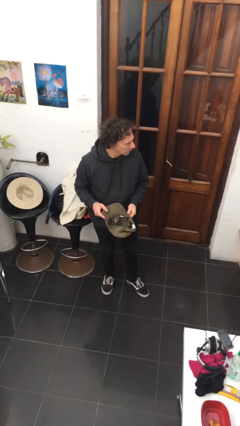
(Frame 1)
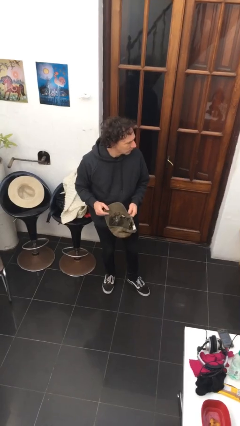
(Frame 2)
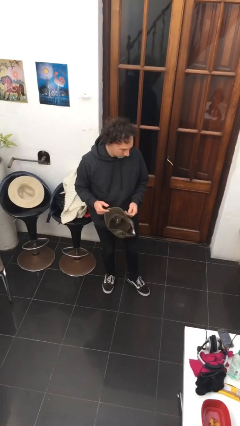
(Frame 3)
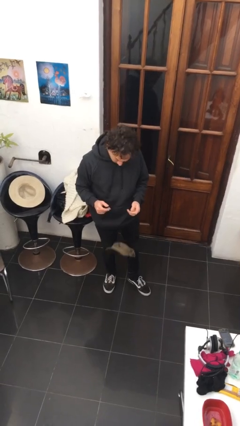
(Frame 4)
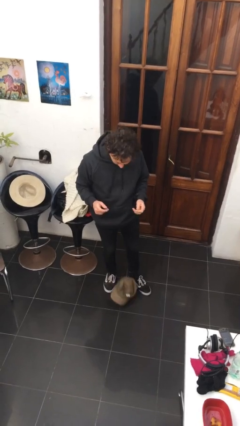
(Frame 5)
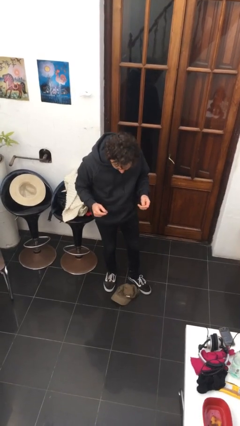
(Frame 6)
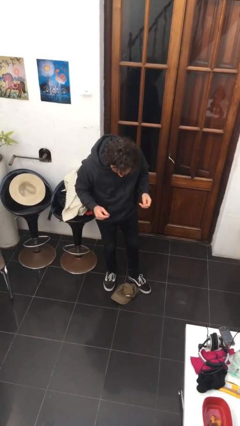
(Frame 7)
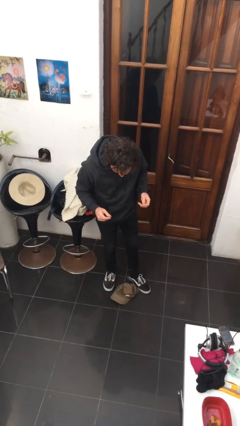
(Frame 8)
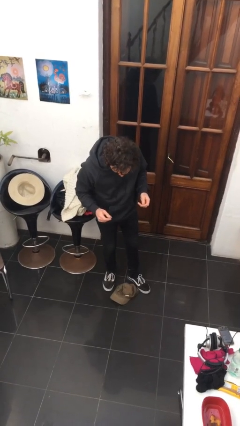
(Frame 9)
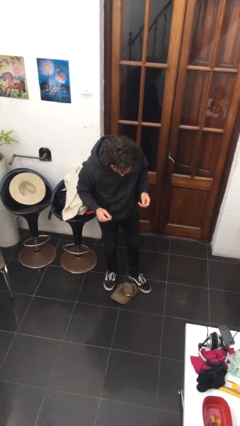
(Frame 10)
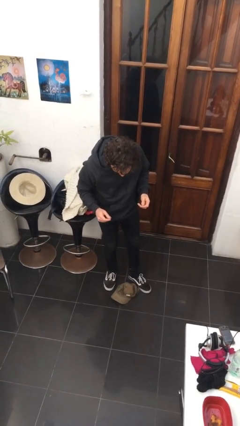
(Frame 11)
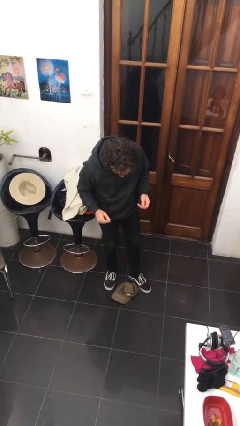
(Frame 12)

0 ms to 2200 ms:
person drops object

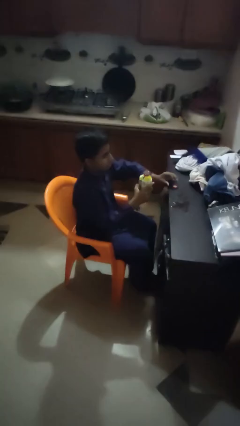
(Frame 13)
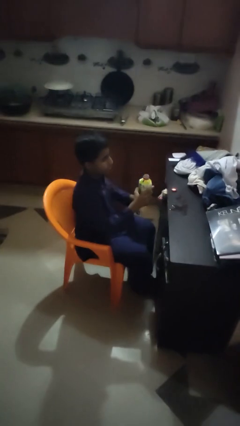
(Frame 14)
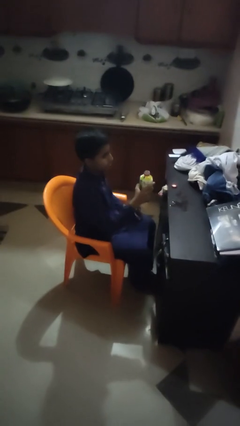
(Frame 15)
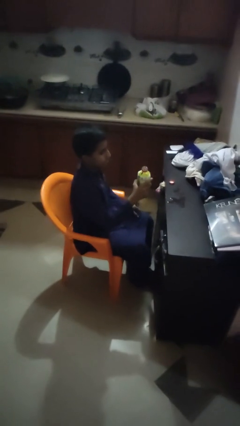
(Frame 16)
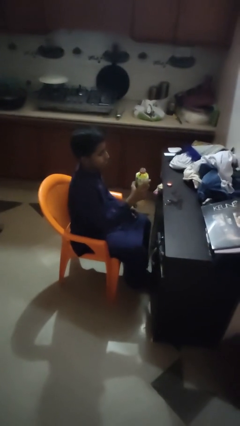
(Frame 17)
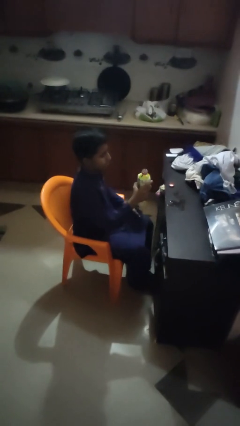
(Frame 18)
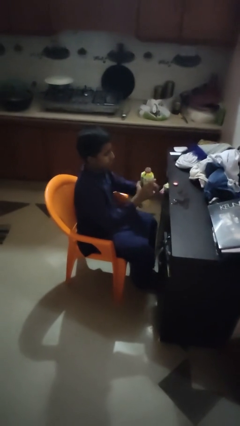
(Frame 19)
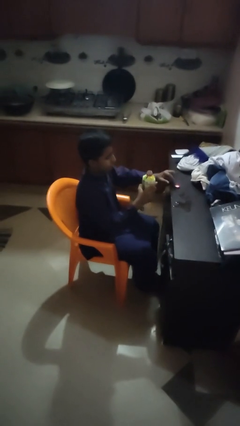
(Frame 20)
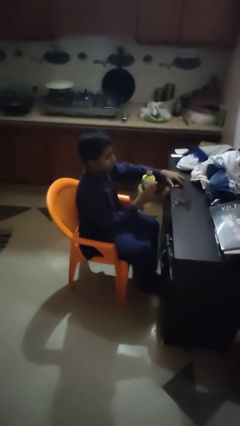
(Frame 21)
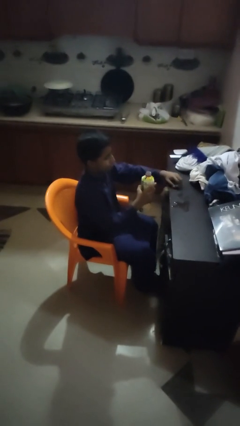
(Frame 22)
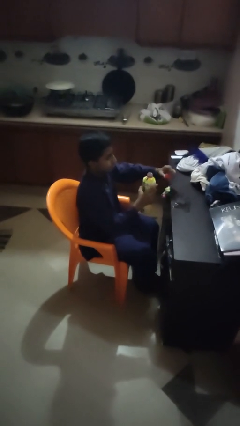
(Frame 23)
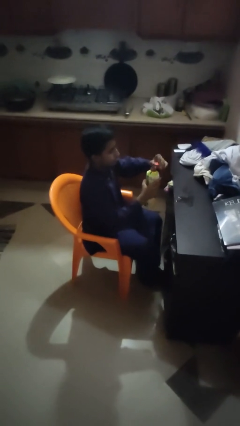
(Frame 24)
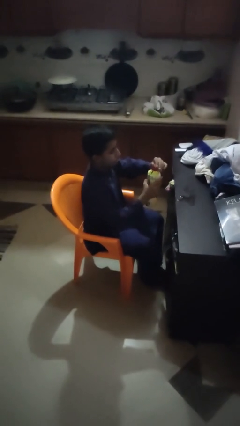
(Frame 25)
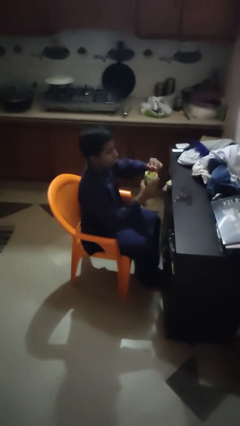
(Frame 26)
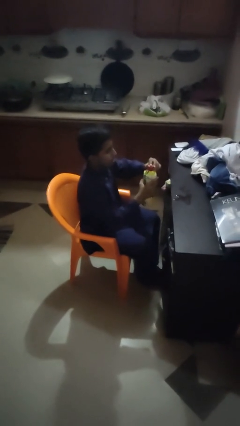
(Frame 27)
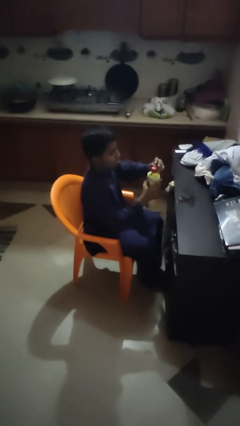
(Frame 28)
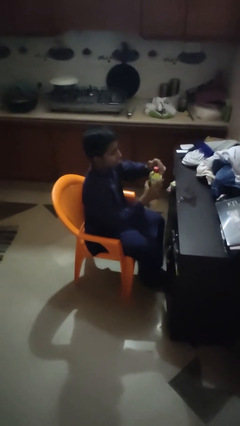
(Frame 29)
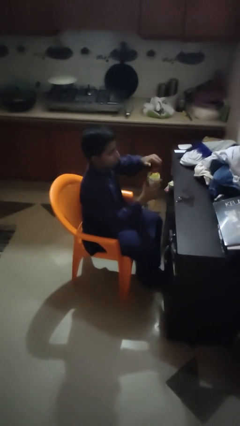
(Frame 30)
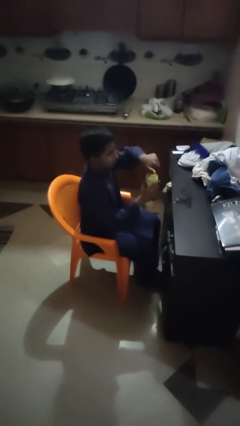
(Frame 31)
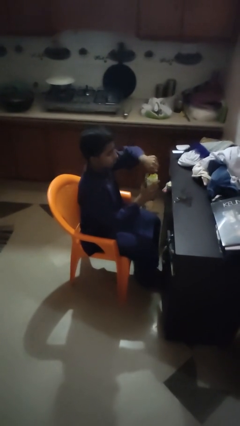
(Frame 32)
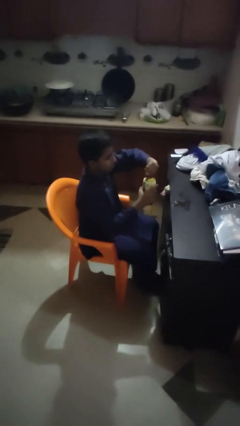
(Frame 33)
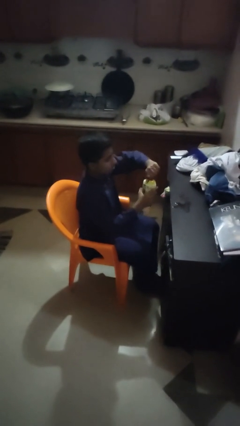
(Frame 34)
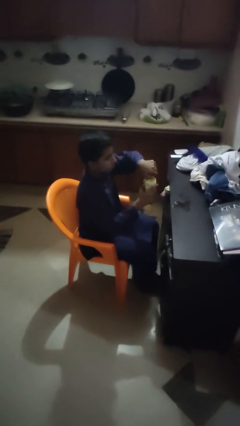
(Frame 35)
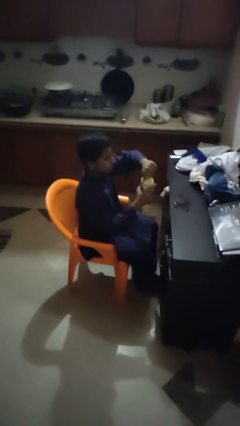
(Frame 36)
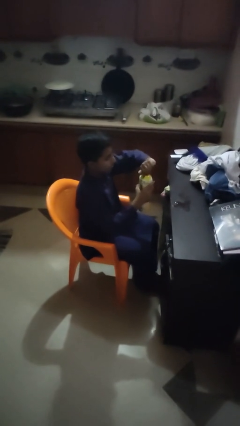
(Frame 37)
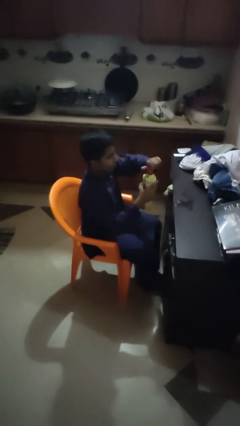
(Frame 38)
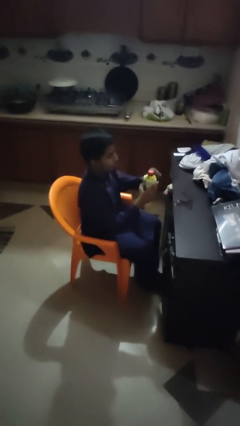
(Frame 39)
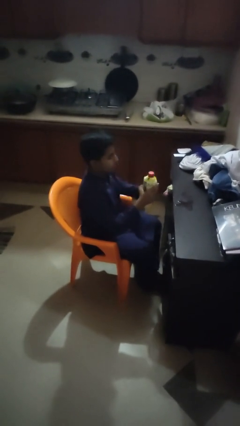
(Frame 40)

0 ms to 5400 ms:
person screws lid to bottle

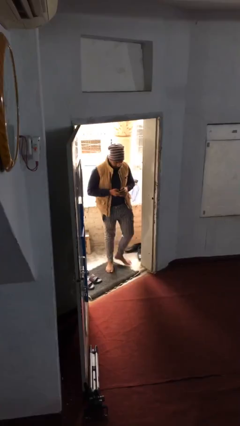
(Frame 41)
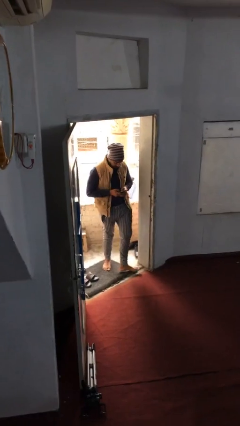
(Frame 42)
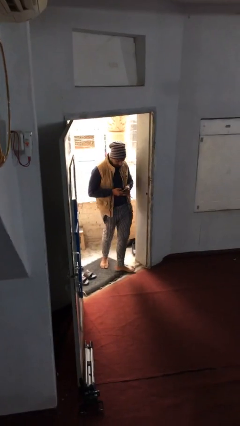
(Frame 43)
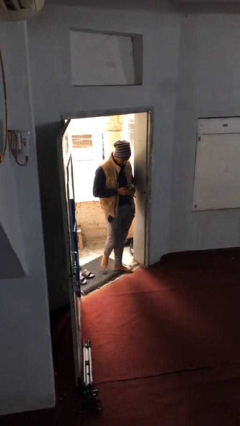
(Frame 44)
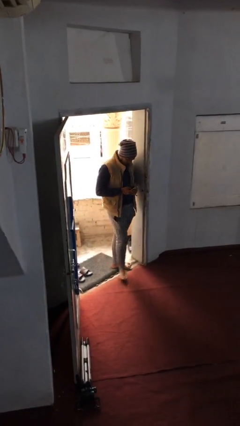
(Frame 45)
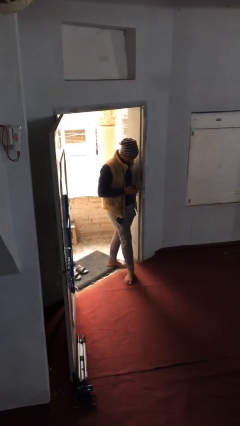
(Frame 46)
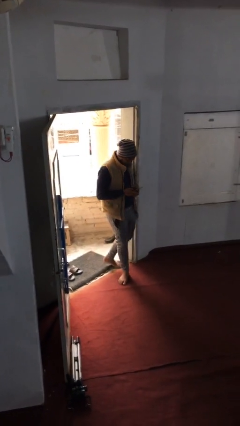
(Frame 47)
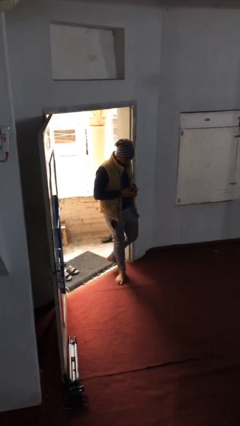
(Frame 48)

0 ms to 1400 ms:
person enters scene through structure

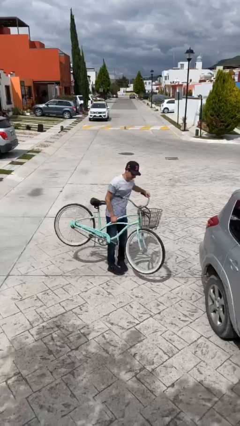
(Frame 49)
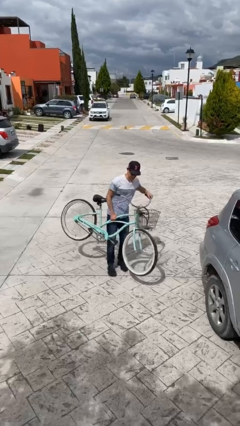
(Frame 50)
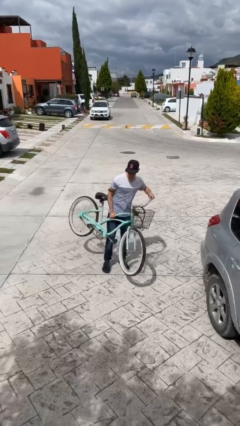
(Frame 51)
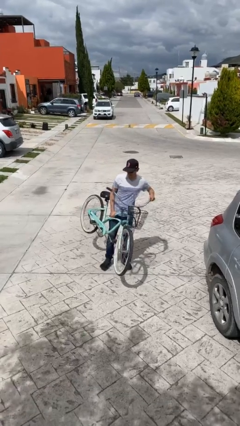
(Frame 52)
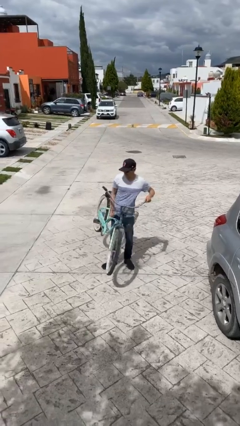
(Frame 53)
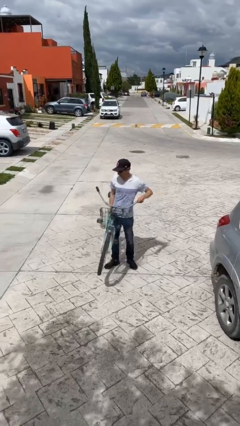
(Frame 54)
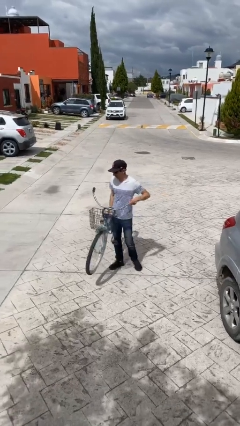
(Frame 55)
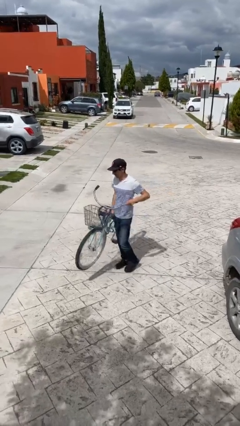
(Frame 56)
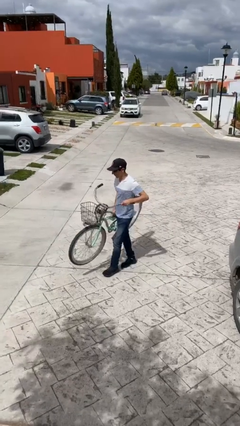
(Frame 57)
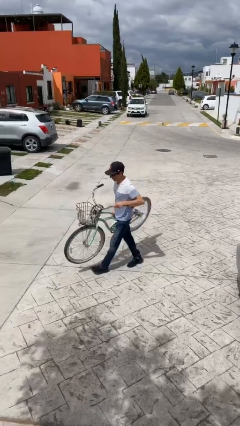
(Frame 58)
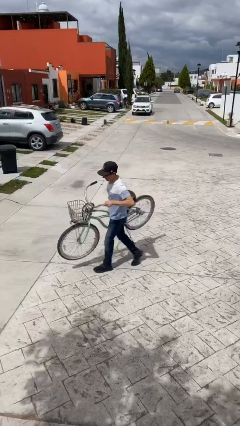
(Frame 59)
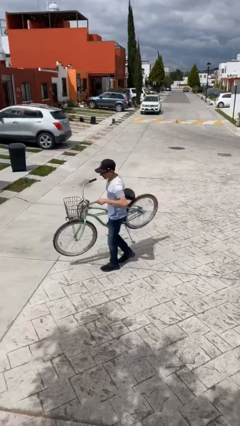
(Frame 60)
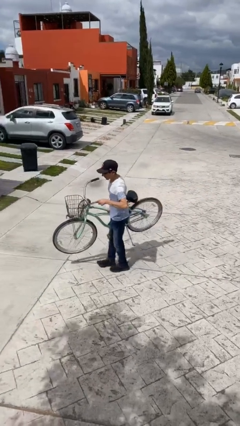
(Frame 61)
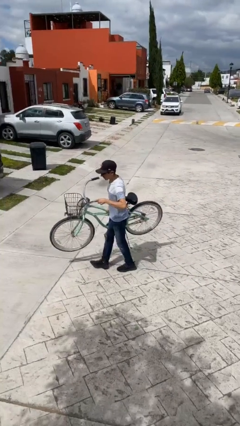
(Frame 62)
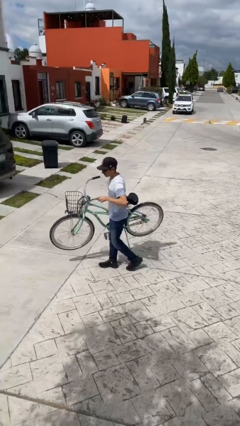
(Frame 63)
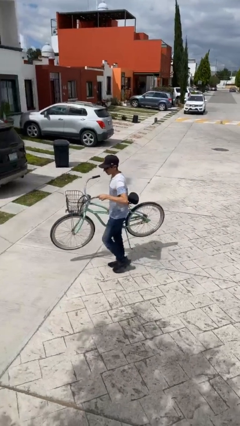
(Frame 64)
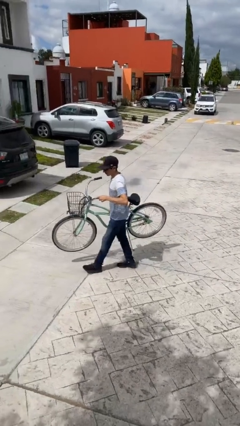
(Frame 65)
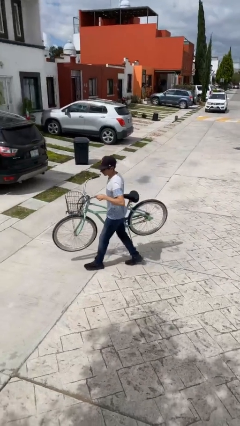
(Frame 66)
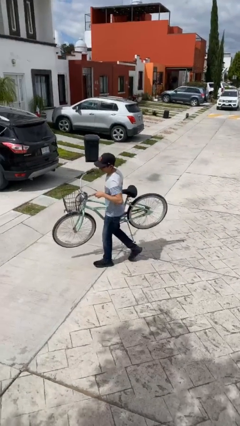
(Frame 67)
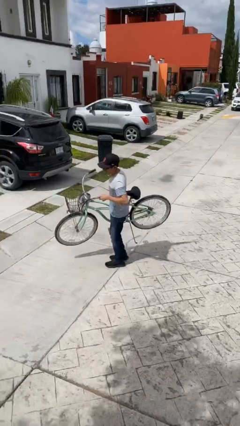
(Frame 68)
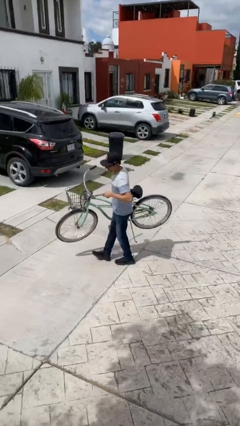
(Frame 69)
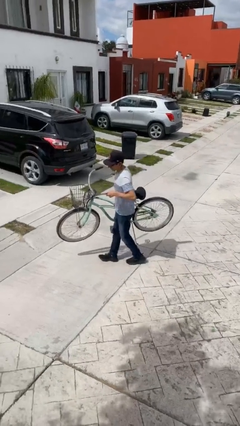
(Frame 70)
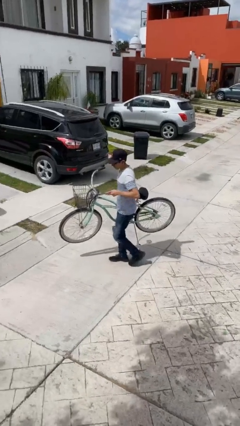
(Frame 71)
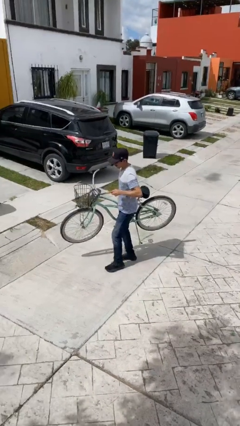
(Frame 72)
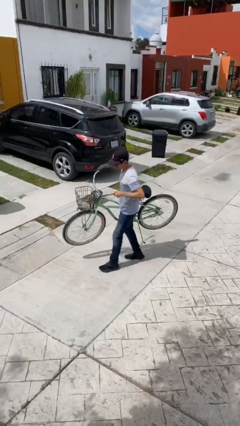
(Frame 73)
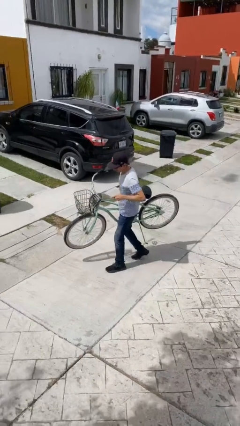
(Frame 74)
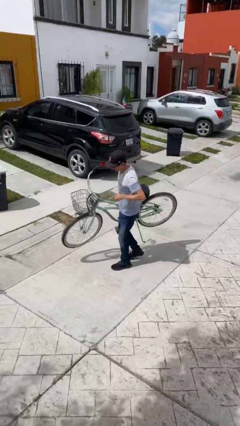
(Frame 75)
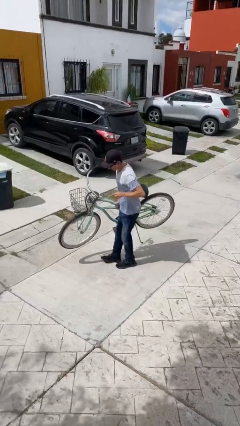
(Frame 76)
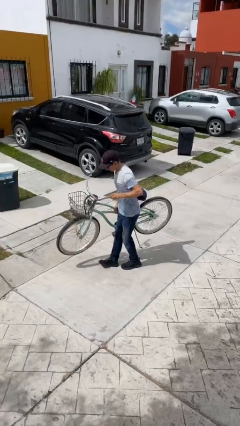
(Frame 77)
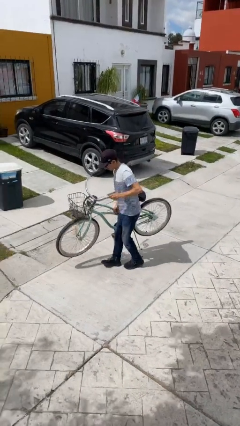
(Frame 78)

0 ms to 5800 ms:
person carries heavy object

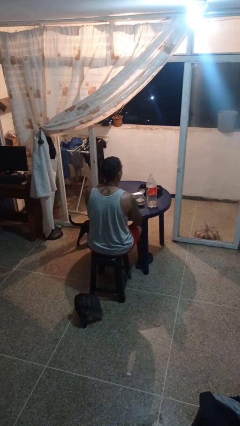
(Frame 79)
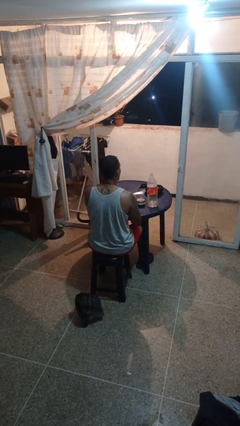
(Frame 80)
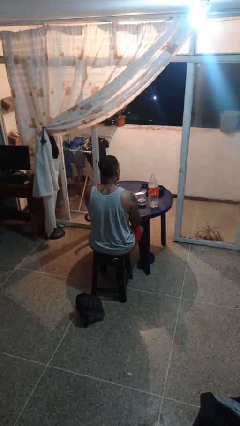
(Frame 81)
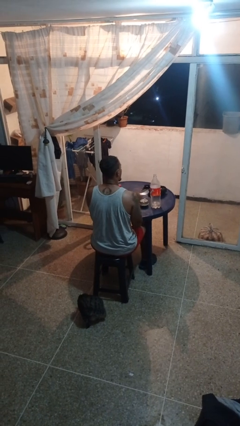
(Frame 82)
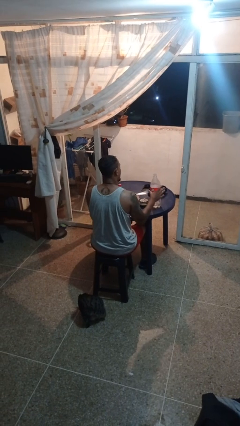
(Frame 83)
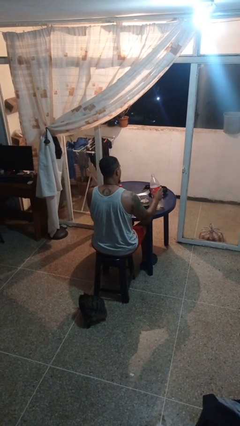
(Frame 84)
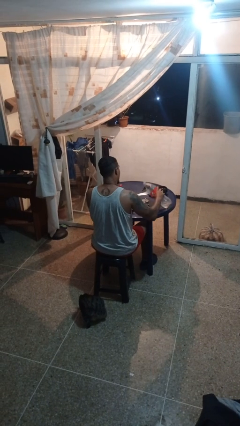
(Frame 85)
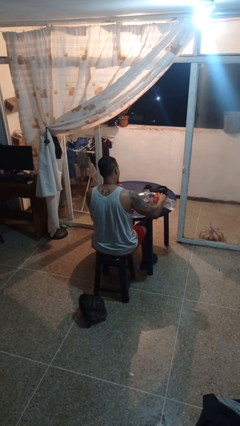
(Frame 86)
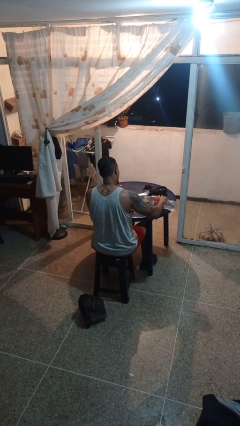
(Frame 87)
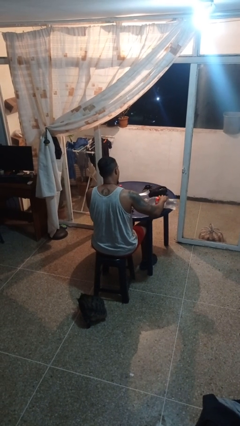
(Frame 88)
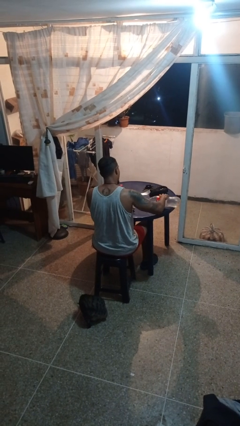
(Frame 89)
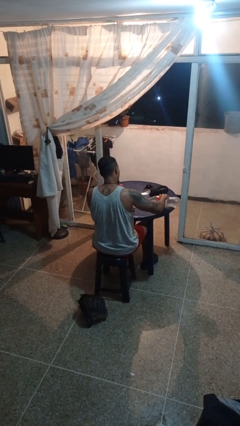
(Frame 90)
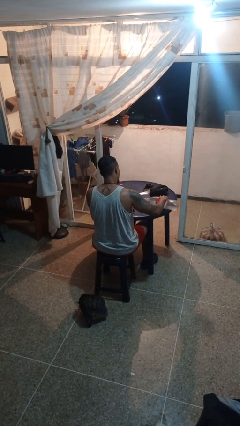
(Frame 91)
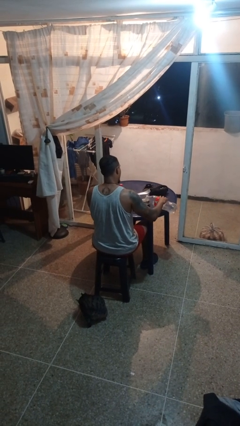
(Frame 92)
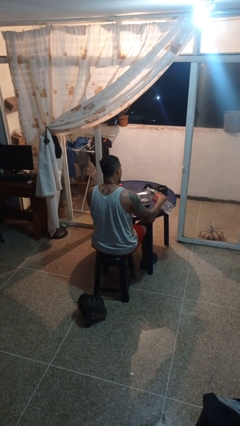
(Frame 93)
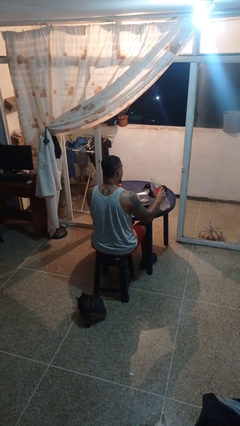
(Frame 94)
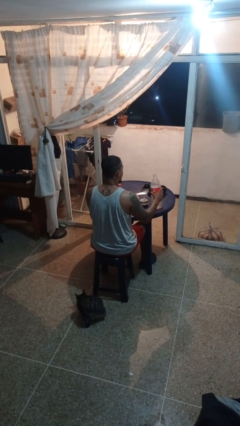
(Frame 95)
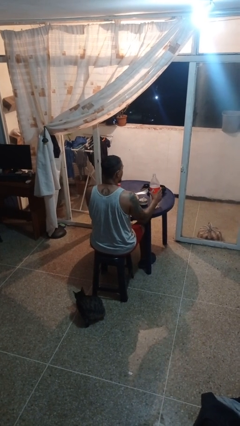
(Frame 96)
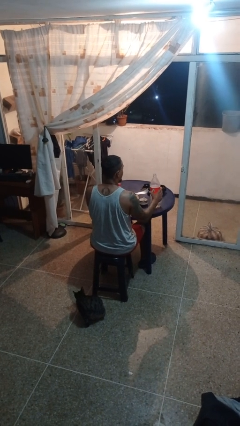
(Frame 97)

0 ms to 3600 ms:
person pours liquid into cup
